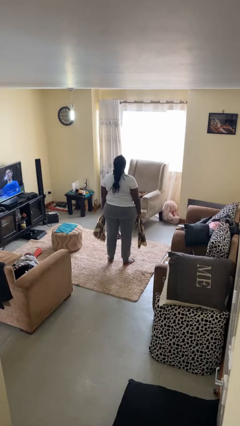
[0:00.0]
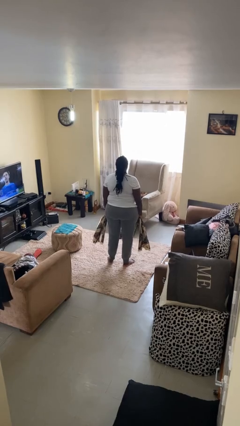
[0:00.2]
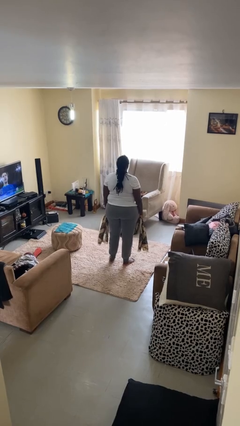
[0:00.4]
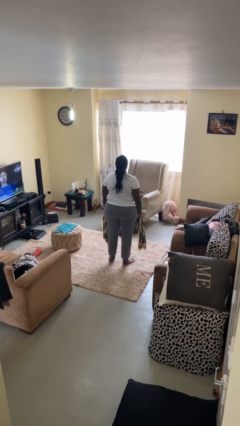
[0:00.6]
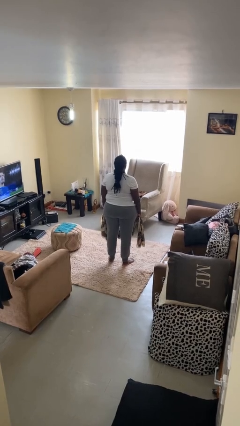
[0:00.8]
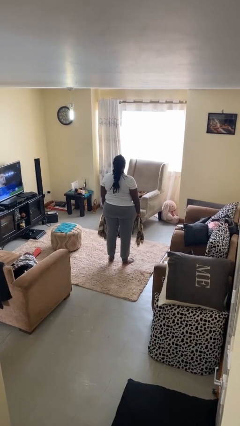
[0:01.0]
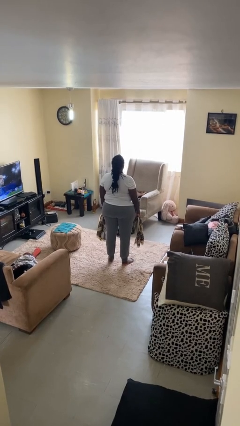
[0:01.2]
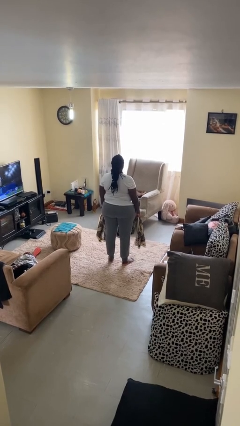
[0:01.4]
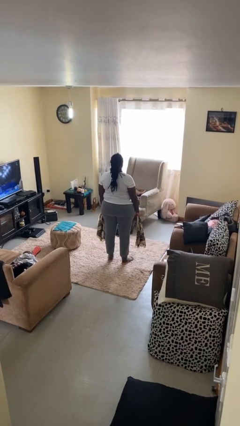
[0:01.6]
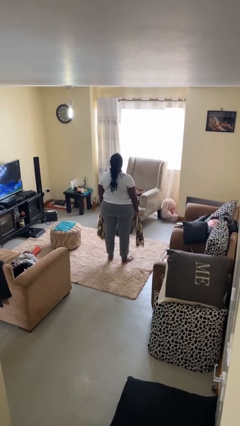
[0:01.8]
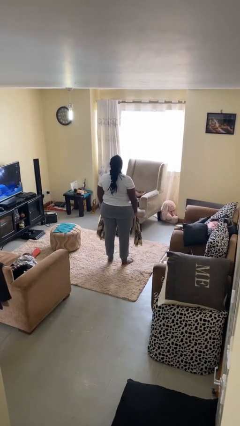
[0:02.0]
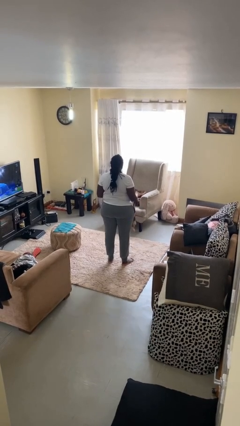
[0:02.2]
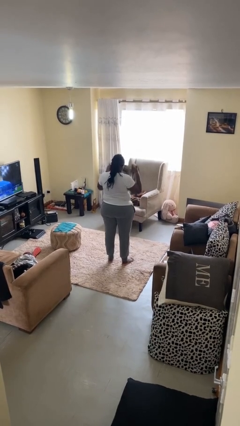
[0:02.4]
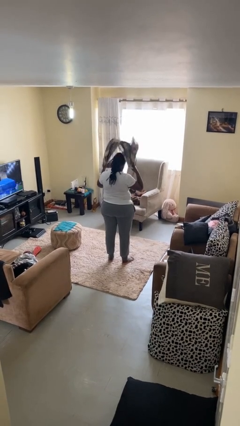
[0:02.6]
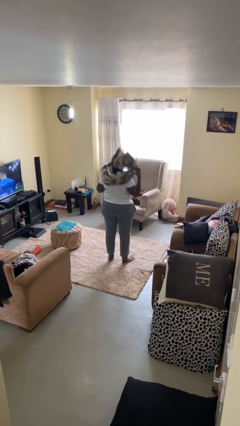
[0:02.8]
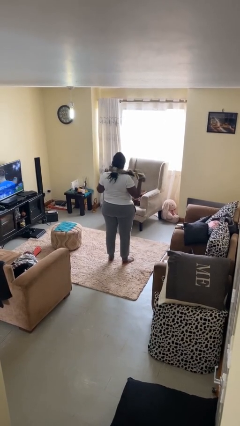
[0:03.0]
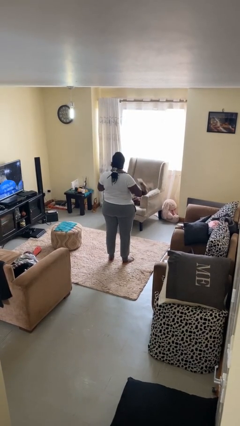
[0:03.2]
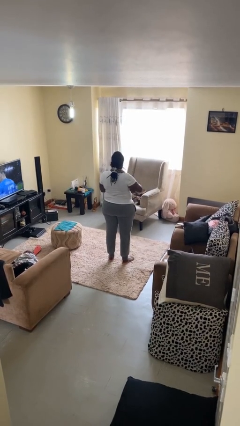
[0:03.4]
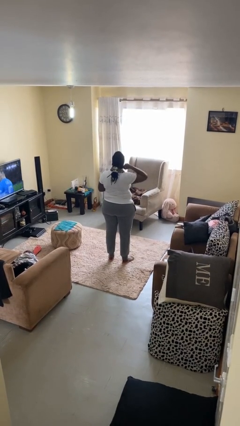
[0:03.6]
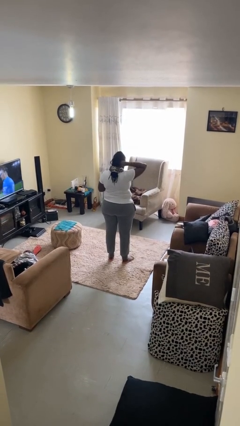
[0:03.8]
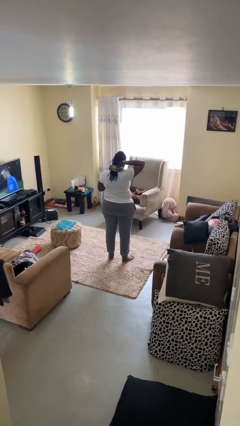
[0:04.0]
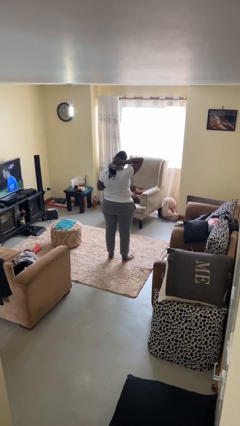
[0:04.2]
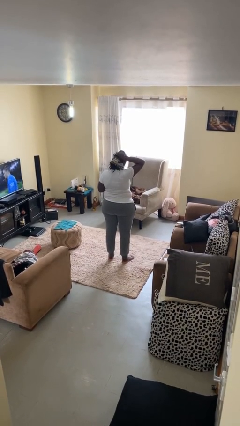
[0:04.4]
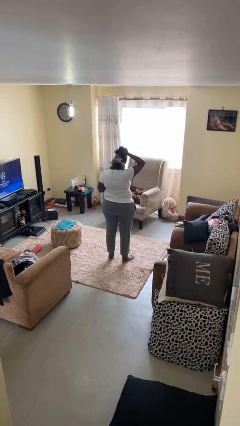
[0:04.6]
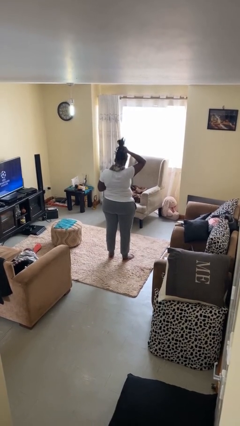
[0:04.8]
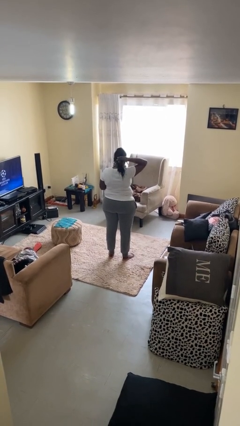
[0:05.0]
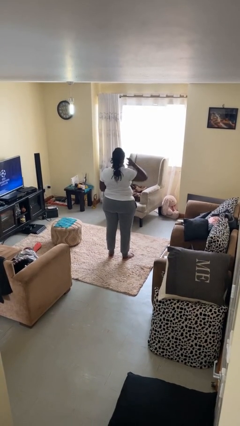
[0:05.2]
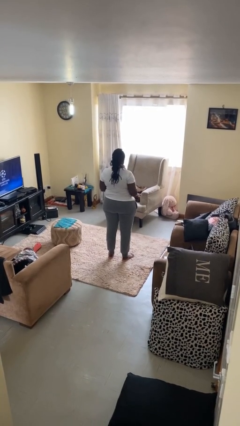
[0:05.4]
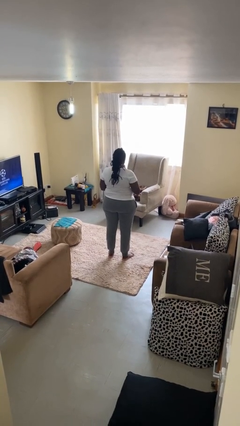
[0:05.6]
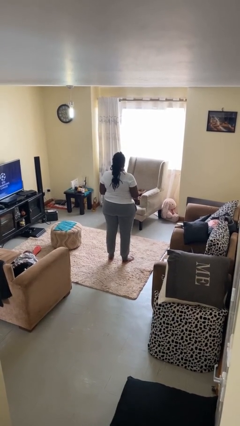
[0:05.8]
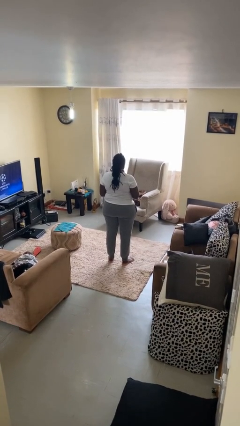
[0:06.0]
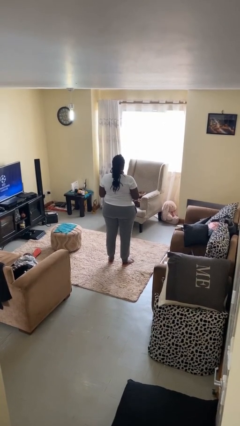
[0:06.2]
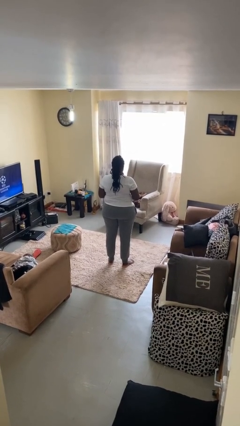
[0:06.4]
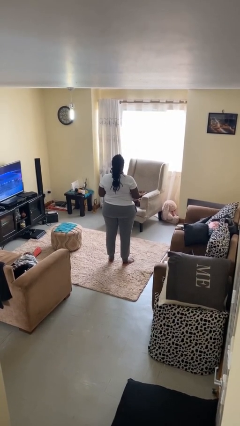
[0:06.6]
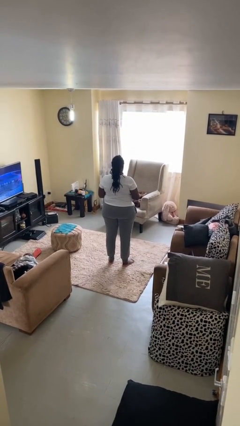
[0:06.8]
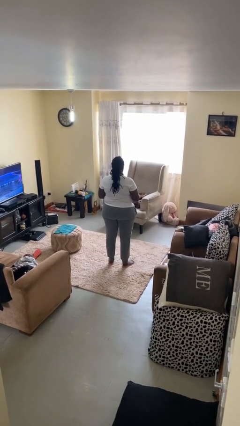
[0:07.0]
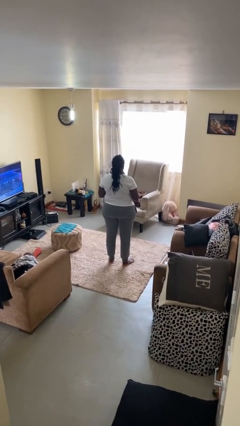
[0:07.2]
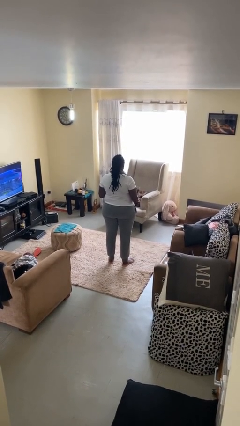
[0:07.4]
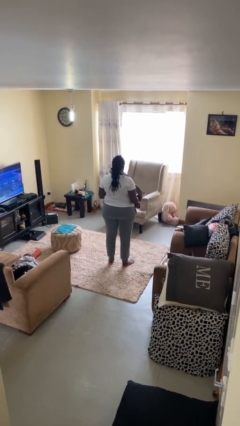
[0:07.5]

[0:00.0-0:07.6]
person puts on scarf

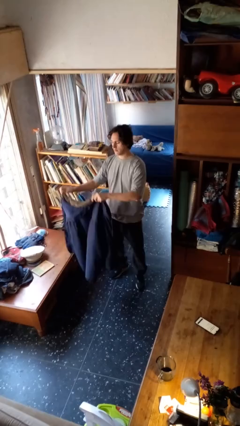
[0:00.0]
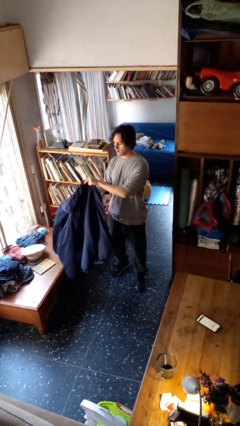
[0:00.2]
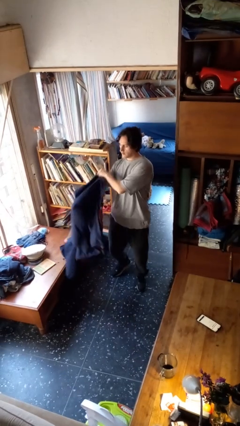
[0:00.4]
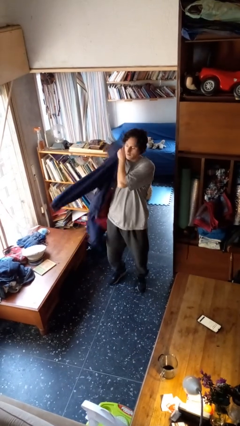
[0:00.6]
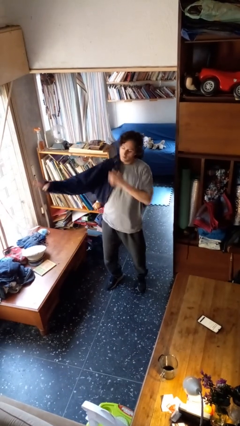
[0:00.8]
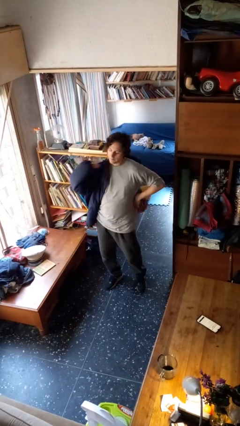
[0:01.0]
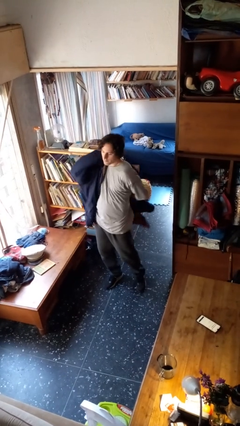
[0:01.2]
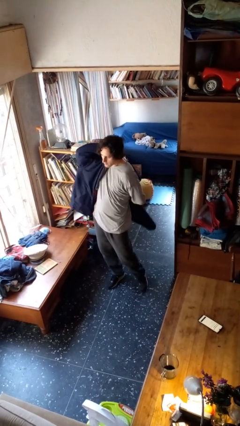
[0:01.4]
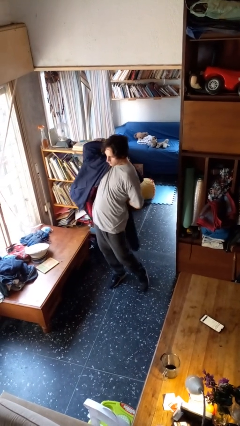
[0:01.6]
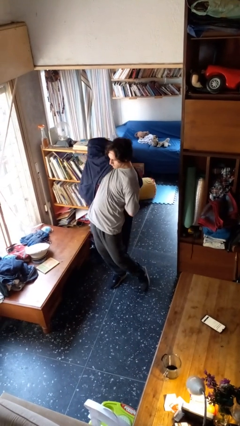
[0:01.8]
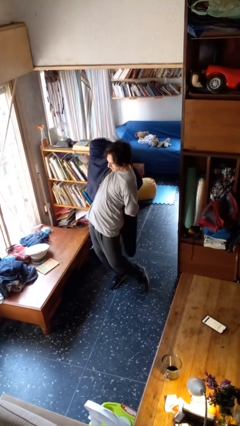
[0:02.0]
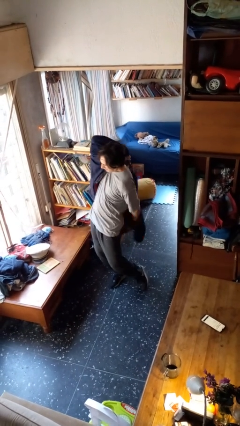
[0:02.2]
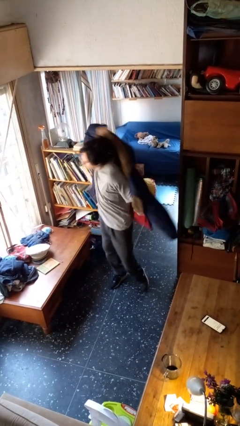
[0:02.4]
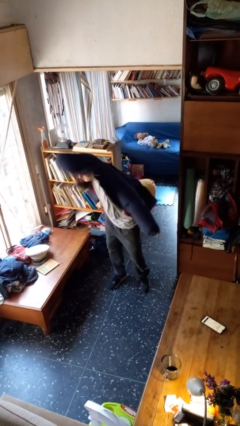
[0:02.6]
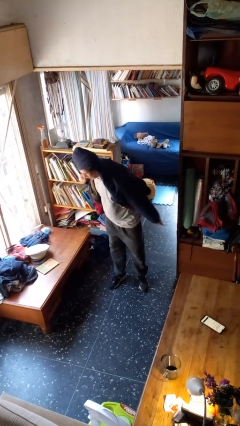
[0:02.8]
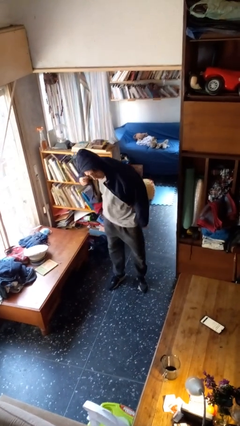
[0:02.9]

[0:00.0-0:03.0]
person puts on hoodie

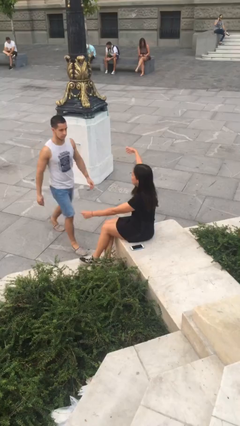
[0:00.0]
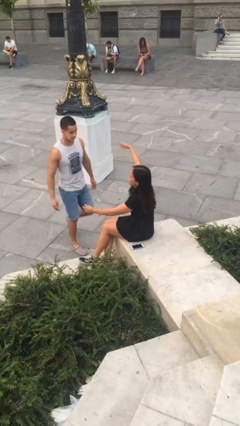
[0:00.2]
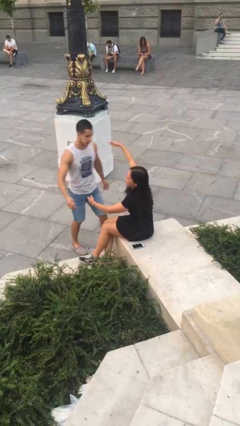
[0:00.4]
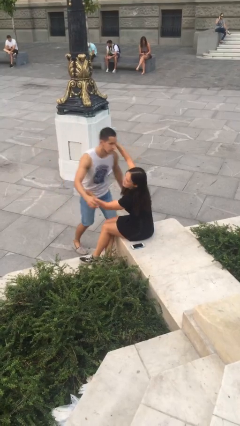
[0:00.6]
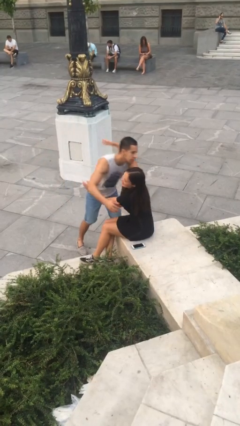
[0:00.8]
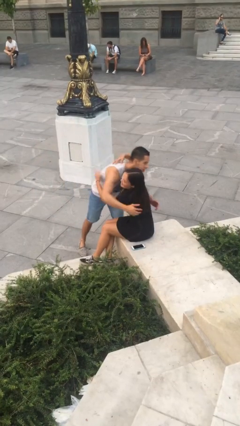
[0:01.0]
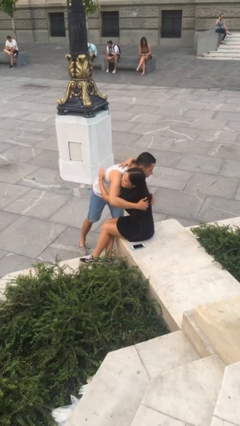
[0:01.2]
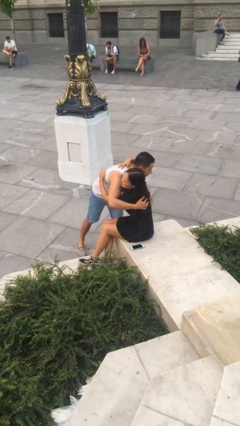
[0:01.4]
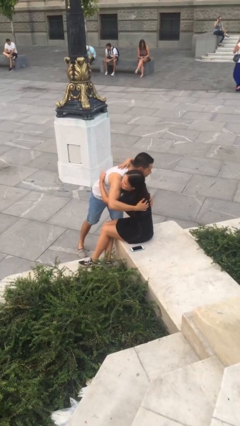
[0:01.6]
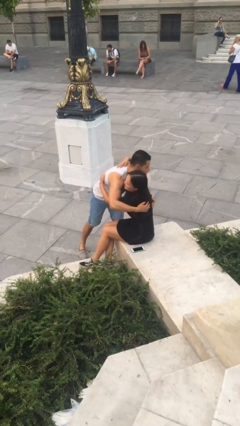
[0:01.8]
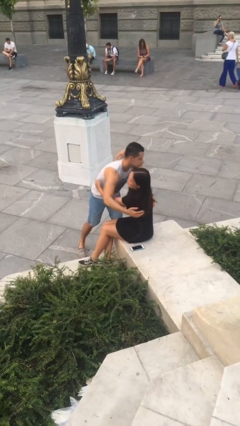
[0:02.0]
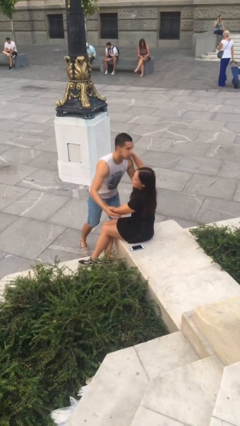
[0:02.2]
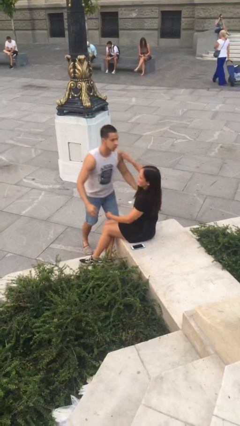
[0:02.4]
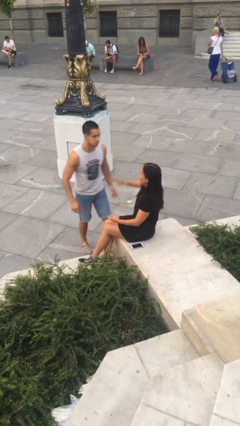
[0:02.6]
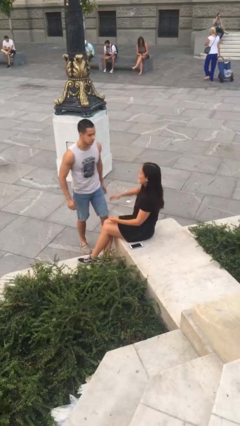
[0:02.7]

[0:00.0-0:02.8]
person embraces person

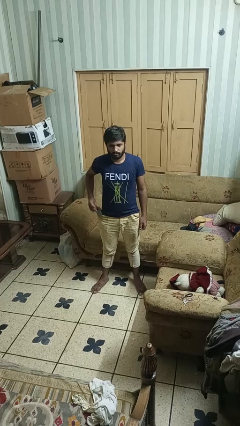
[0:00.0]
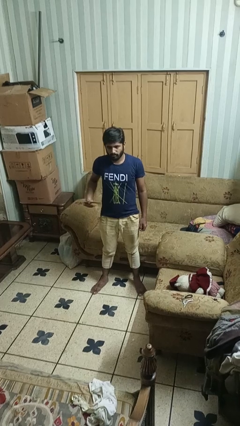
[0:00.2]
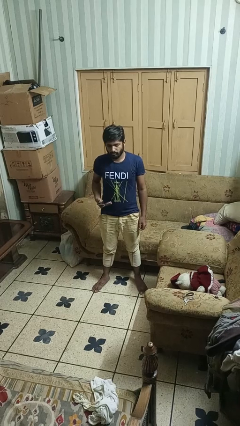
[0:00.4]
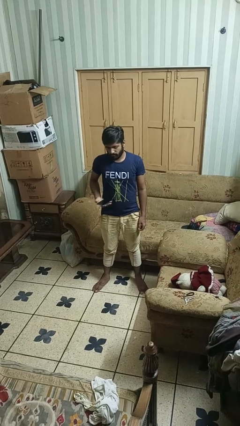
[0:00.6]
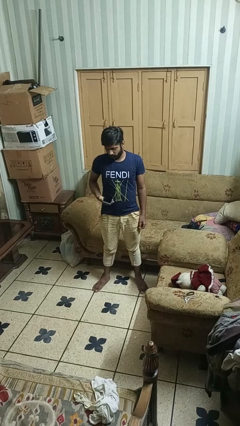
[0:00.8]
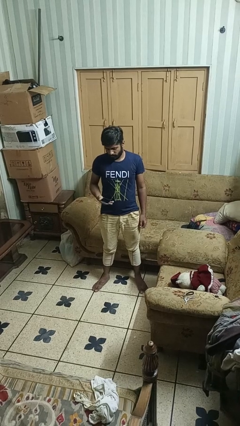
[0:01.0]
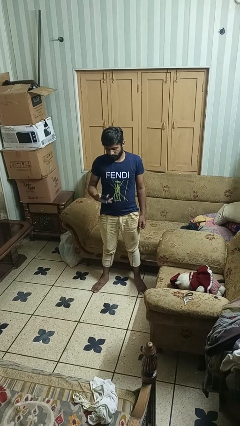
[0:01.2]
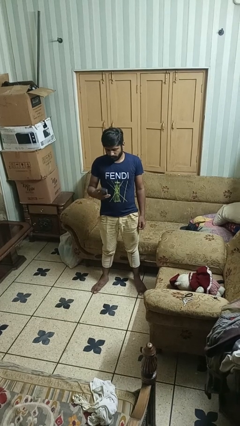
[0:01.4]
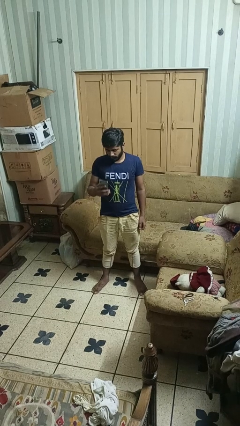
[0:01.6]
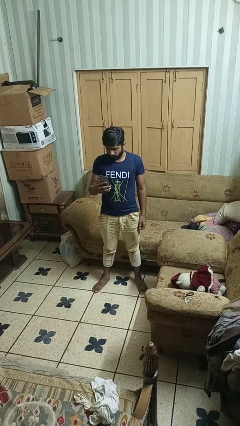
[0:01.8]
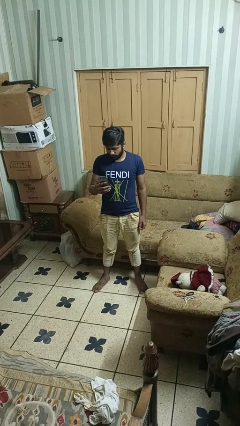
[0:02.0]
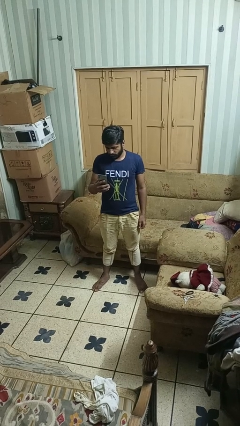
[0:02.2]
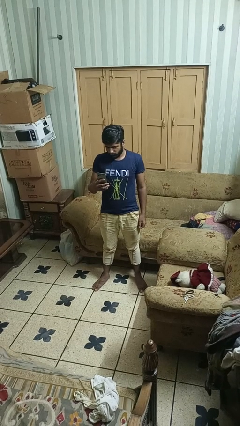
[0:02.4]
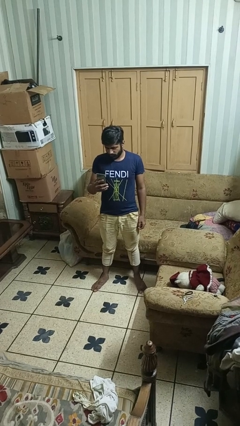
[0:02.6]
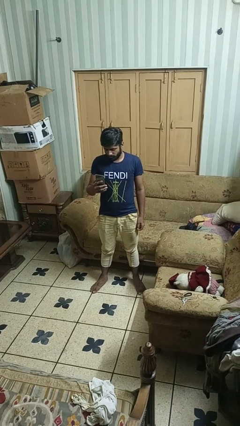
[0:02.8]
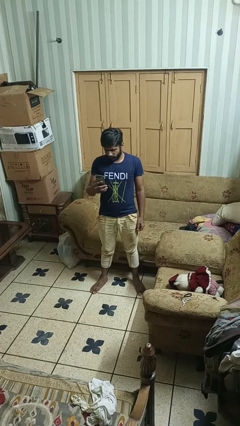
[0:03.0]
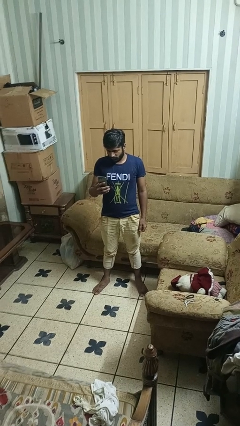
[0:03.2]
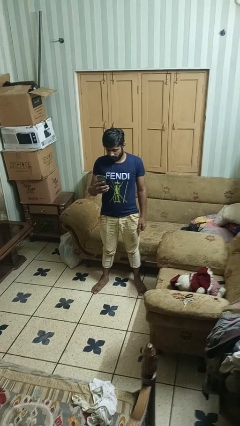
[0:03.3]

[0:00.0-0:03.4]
person takes phone from pocket

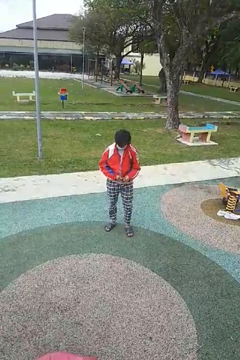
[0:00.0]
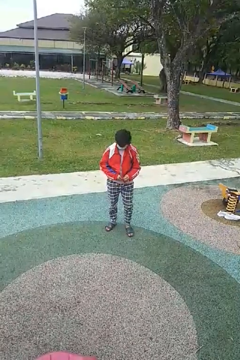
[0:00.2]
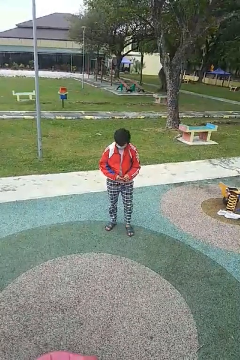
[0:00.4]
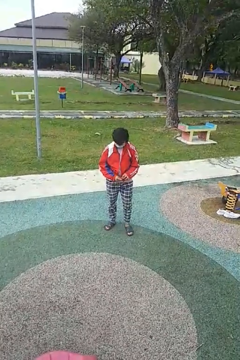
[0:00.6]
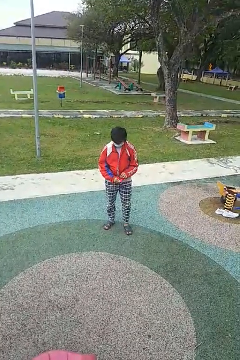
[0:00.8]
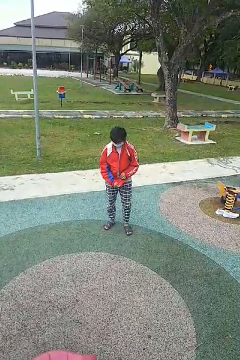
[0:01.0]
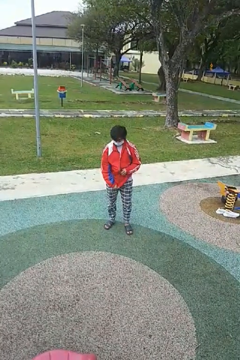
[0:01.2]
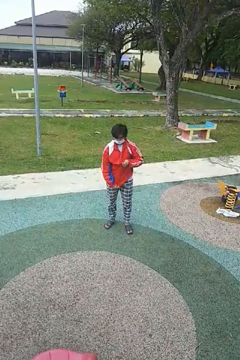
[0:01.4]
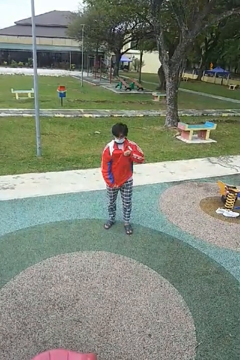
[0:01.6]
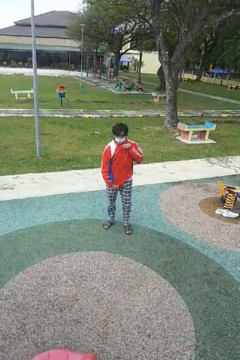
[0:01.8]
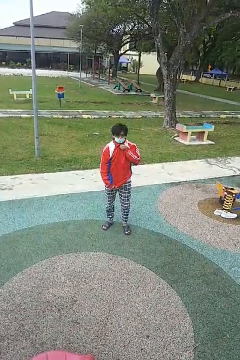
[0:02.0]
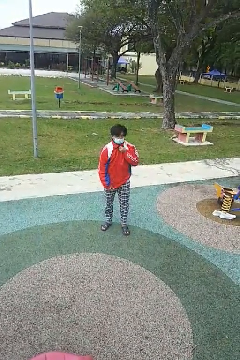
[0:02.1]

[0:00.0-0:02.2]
person zips up jacket
